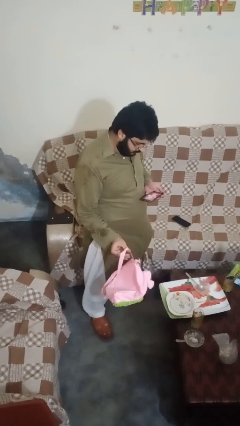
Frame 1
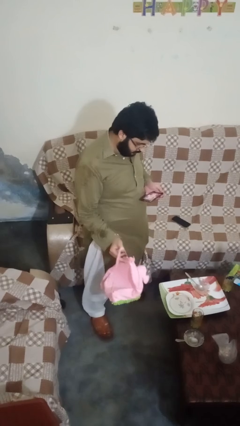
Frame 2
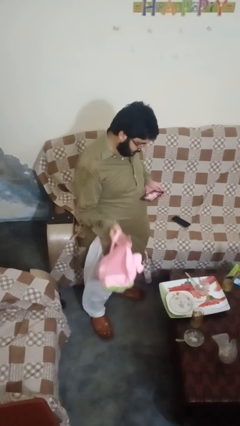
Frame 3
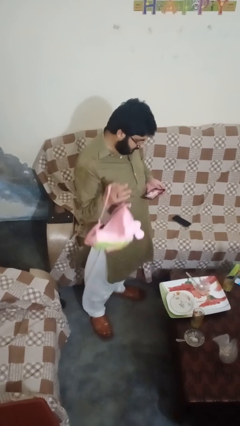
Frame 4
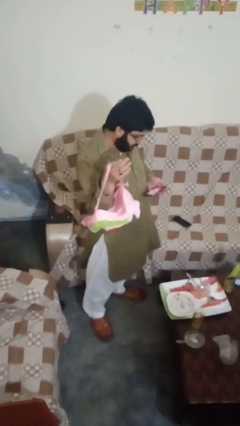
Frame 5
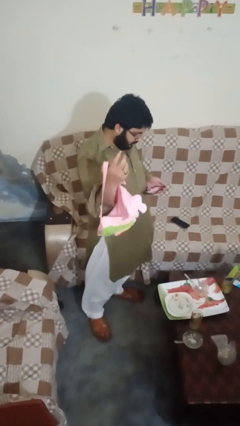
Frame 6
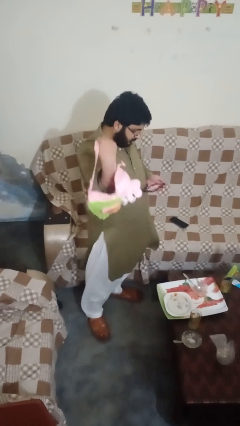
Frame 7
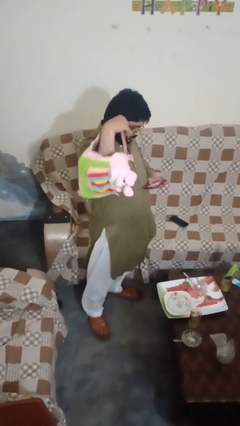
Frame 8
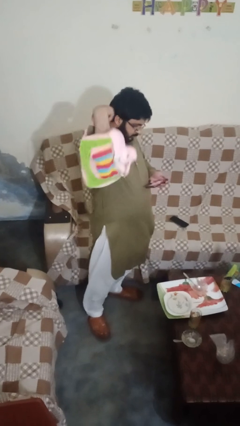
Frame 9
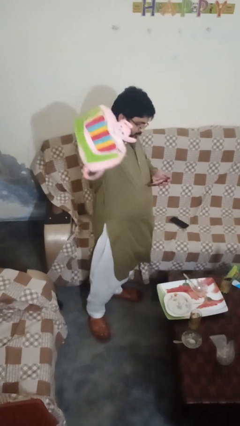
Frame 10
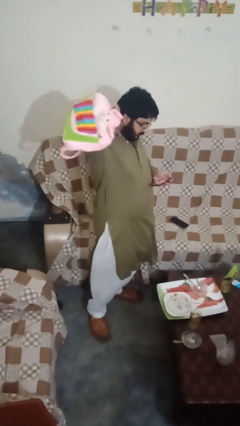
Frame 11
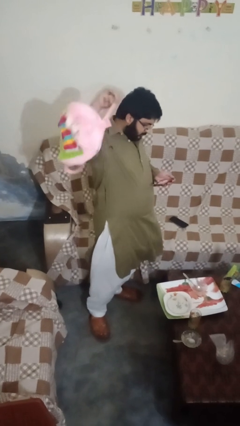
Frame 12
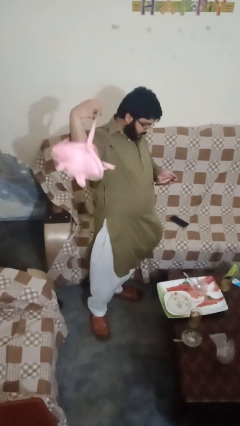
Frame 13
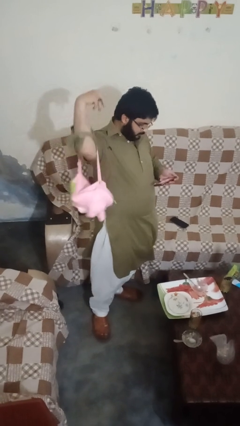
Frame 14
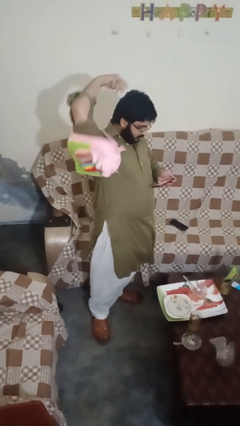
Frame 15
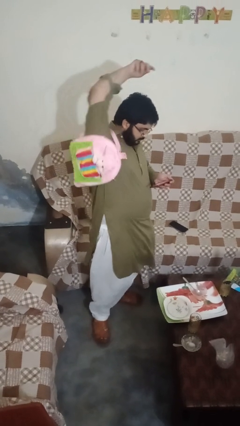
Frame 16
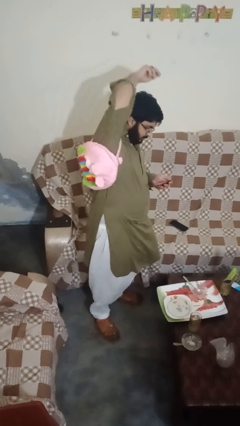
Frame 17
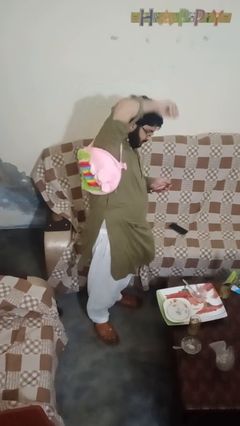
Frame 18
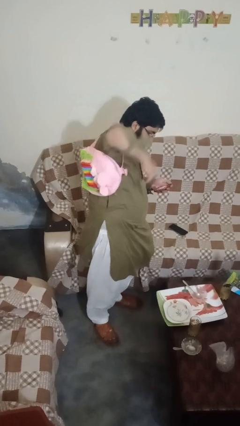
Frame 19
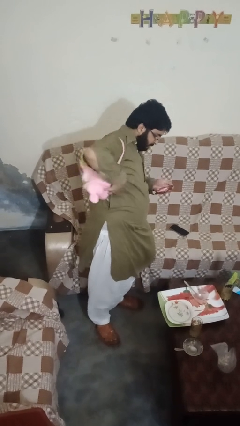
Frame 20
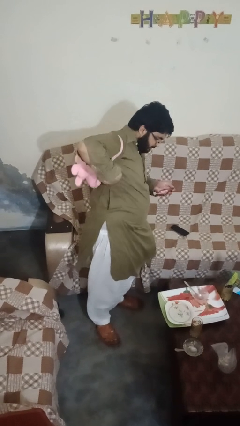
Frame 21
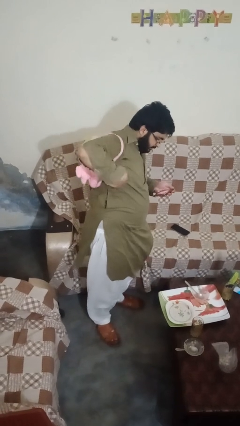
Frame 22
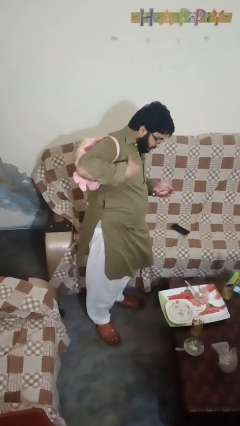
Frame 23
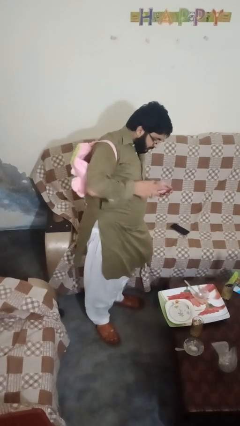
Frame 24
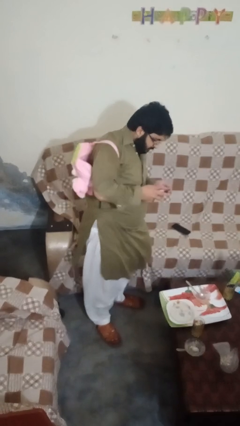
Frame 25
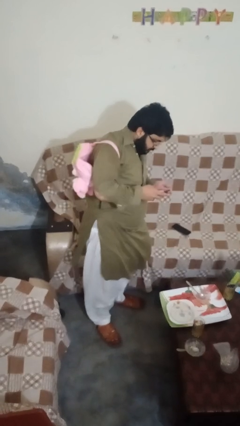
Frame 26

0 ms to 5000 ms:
person puts on backpack

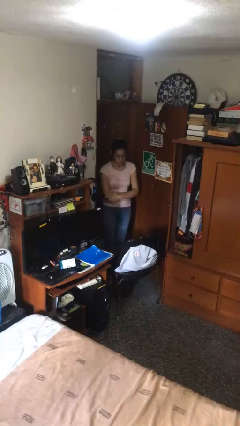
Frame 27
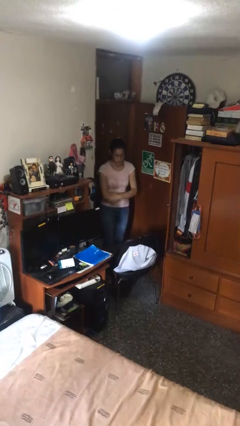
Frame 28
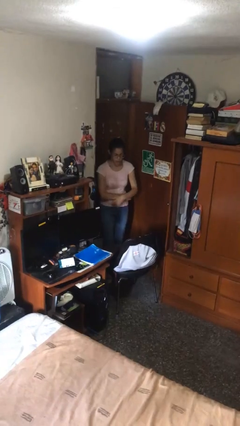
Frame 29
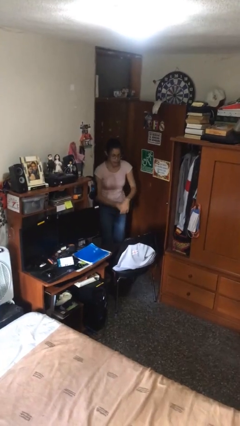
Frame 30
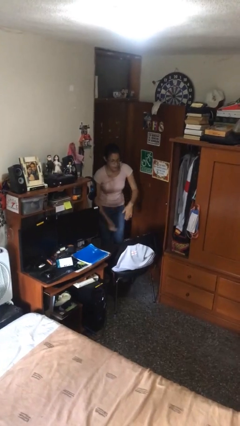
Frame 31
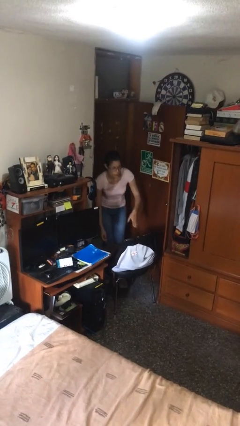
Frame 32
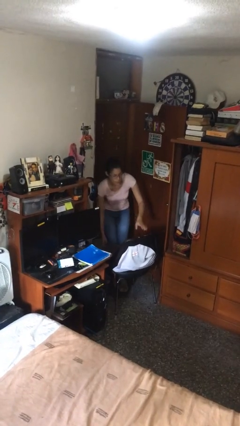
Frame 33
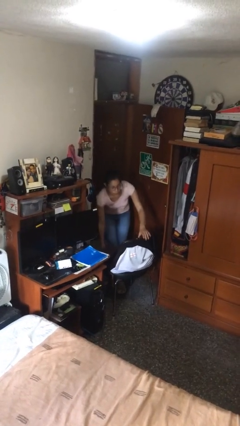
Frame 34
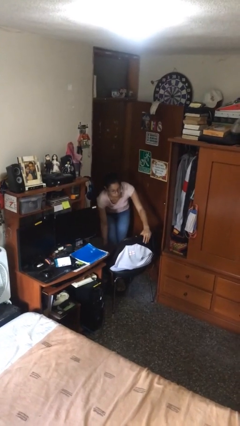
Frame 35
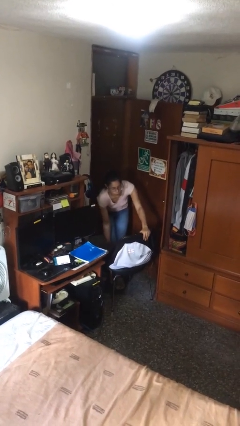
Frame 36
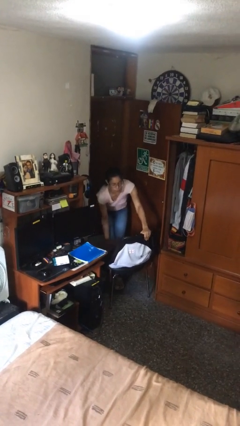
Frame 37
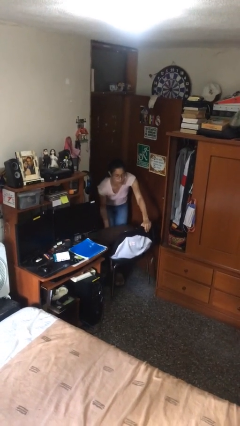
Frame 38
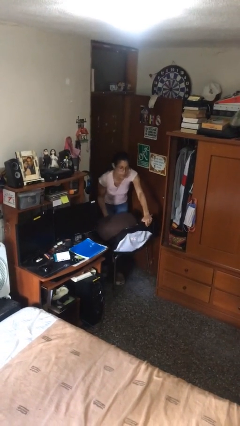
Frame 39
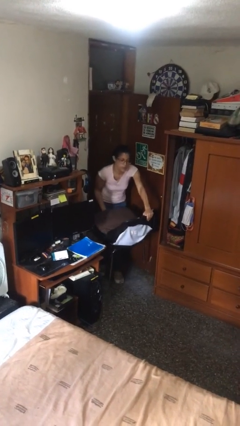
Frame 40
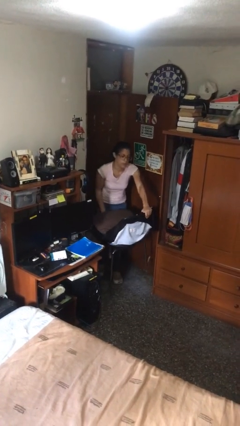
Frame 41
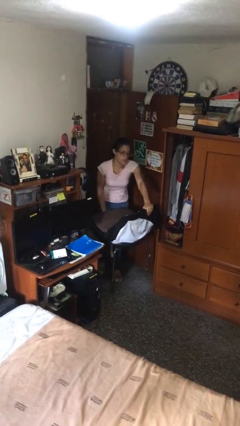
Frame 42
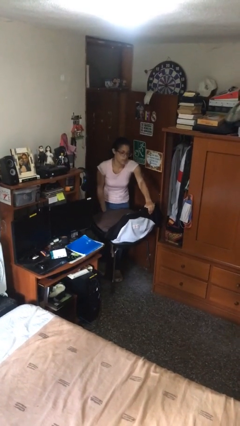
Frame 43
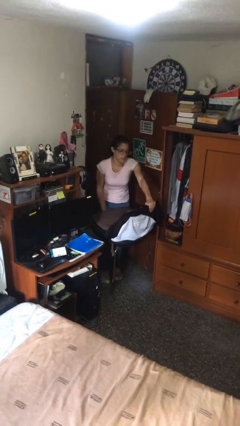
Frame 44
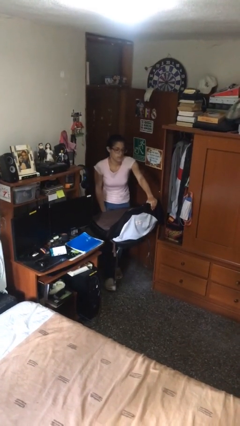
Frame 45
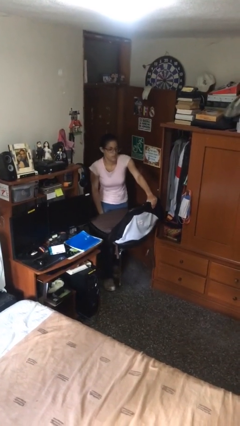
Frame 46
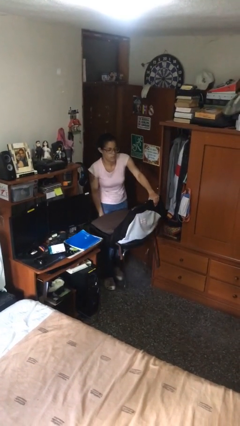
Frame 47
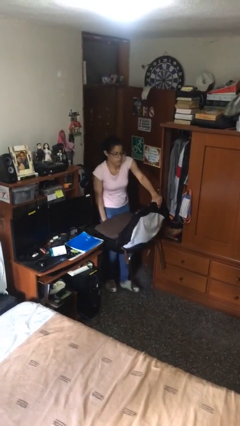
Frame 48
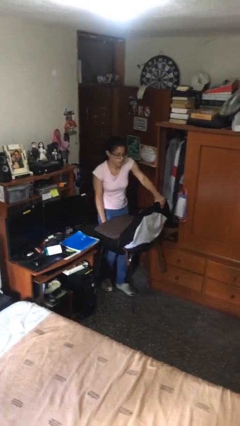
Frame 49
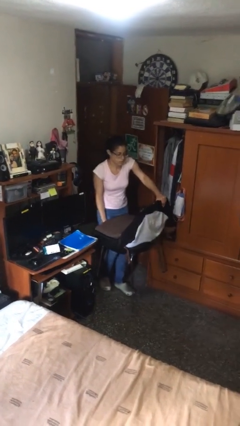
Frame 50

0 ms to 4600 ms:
person picks up object from floor

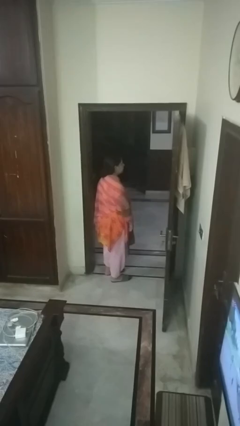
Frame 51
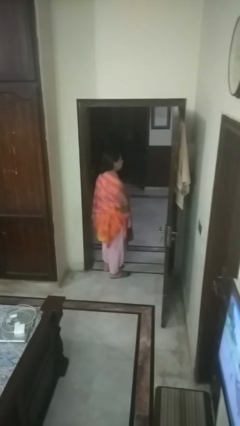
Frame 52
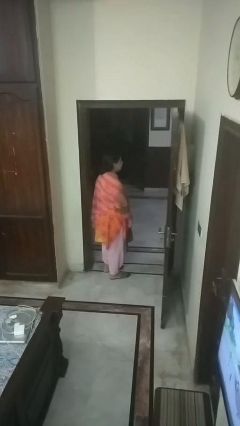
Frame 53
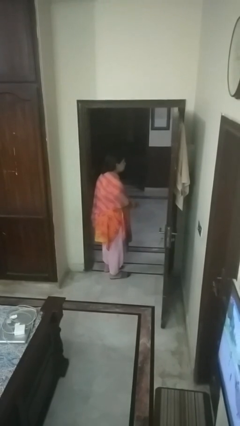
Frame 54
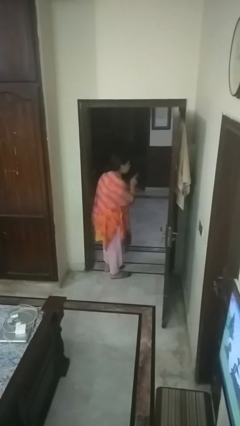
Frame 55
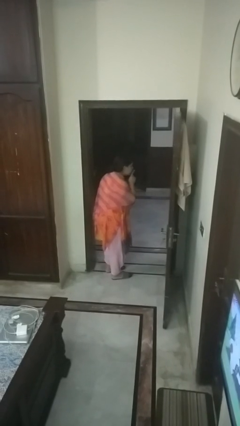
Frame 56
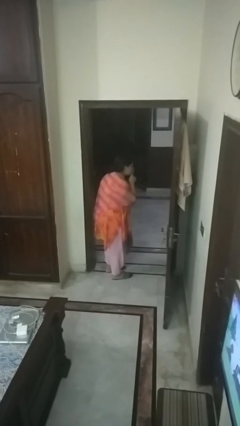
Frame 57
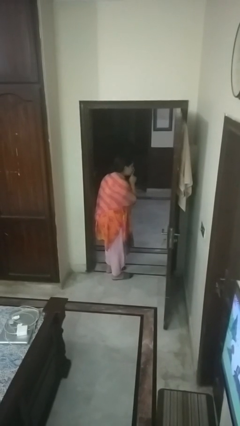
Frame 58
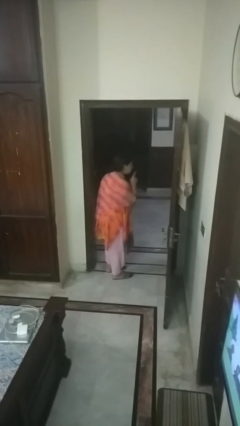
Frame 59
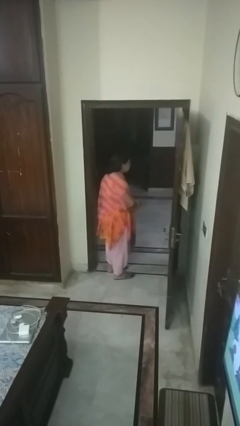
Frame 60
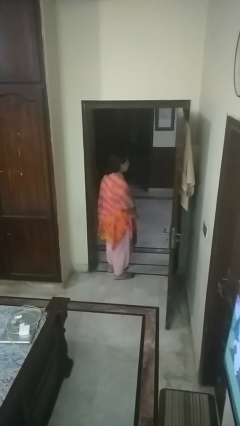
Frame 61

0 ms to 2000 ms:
person gestures be quiet

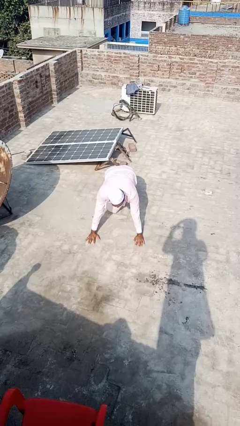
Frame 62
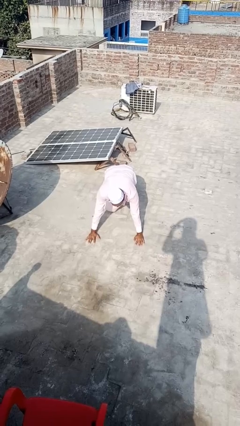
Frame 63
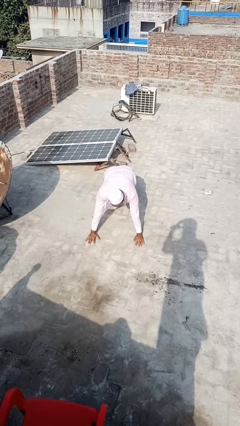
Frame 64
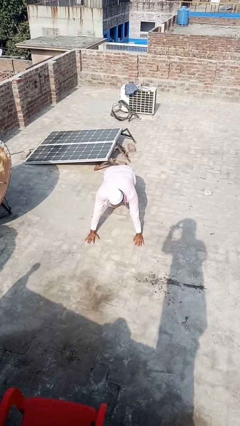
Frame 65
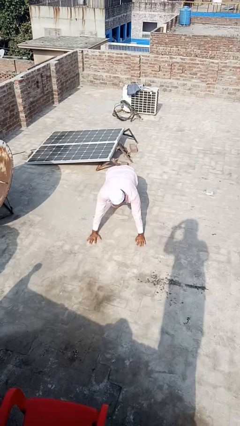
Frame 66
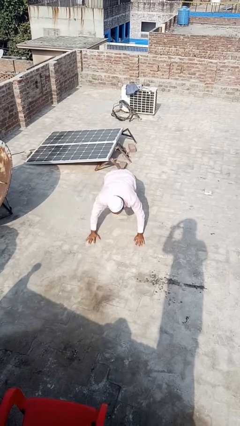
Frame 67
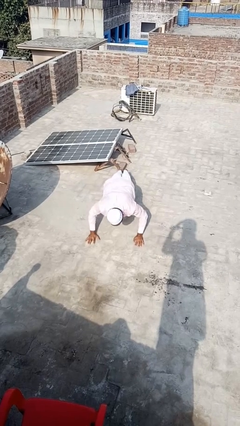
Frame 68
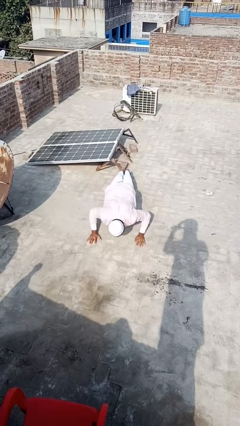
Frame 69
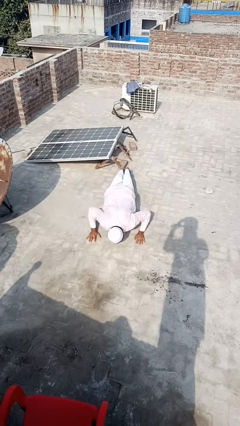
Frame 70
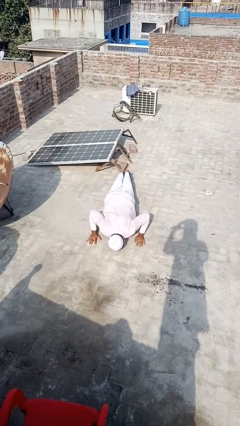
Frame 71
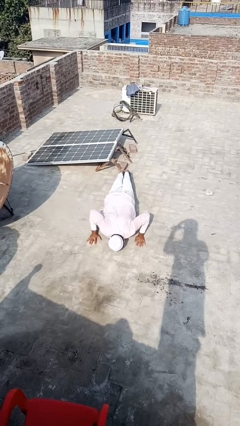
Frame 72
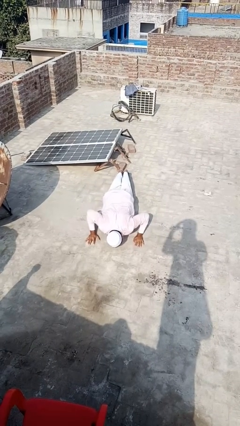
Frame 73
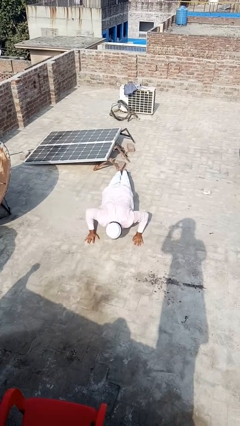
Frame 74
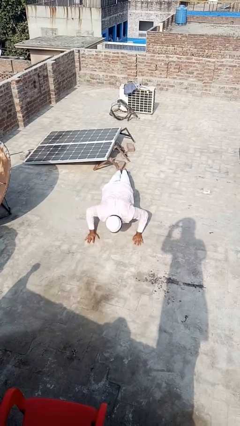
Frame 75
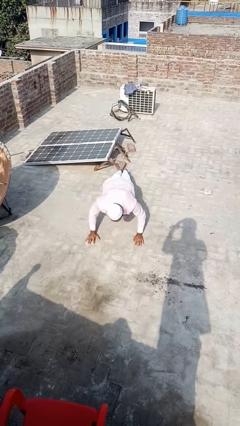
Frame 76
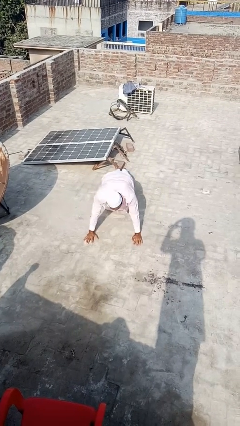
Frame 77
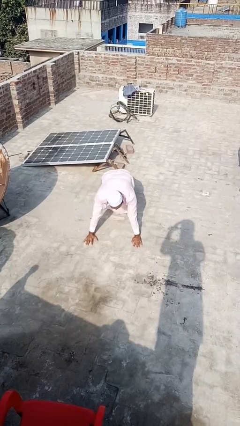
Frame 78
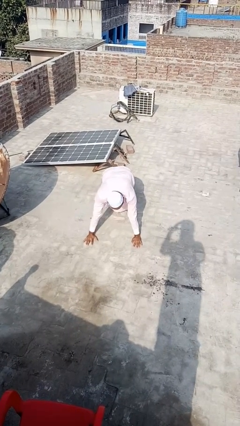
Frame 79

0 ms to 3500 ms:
person exercises with pushup

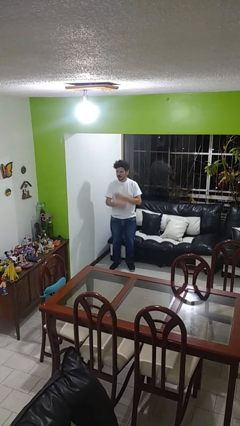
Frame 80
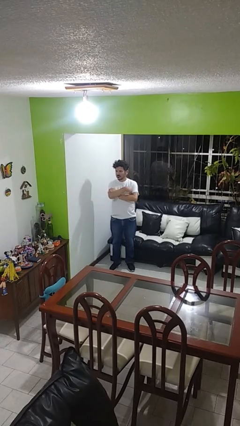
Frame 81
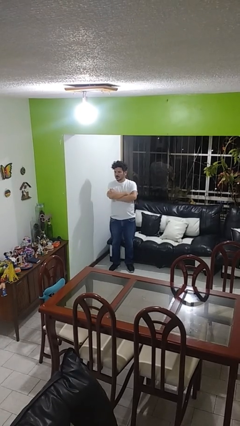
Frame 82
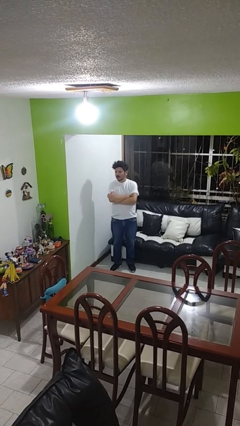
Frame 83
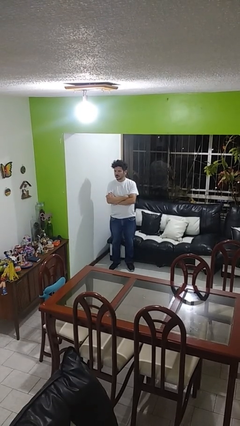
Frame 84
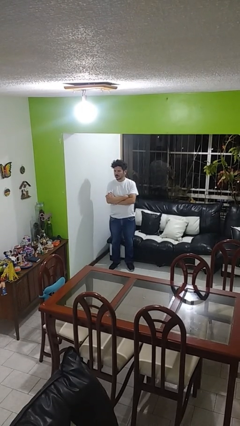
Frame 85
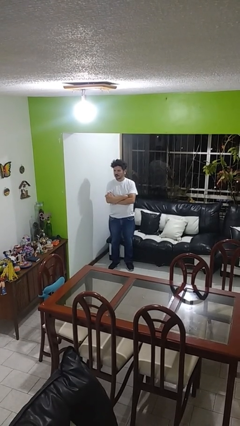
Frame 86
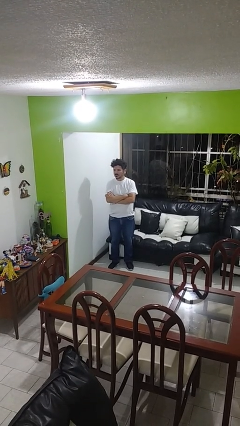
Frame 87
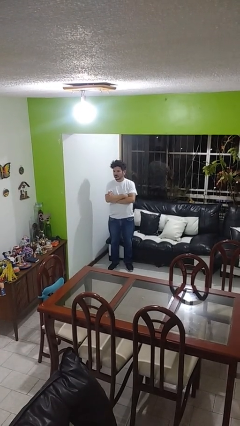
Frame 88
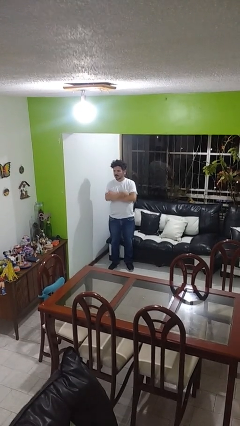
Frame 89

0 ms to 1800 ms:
person crosses arms

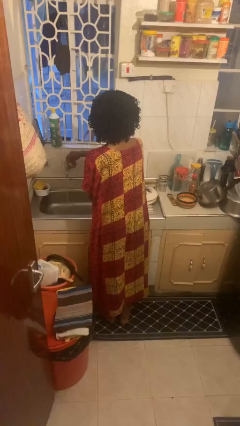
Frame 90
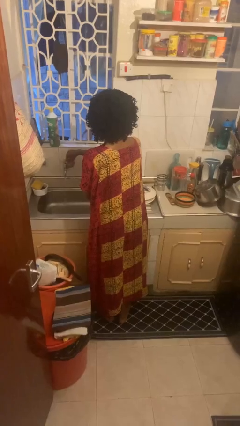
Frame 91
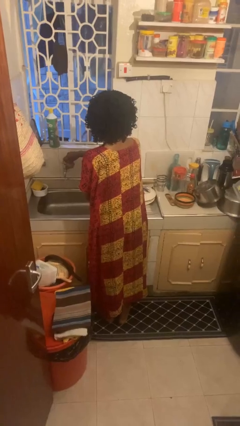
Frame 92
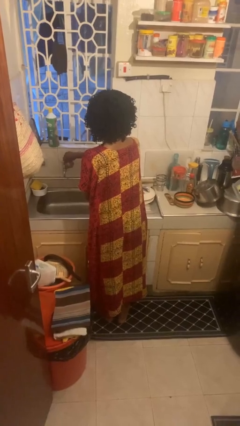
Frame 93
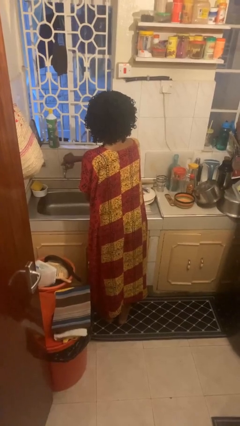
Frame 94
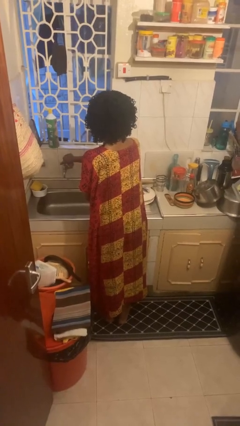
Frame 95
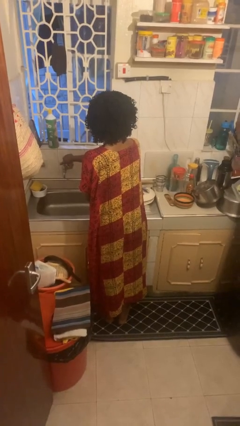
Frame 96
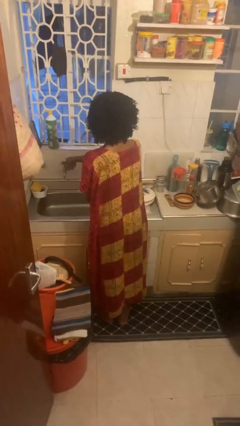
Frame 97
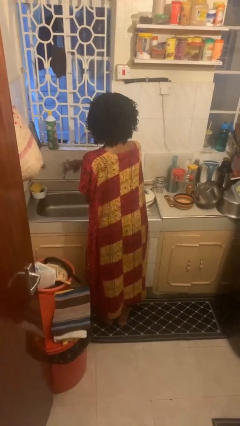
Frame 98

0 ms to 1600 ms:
person turns off faucet
